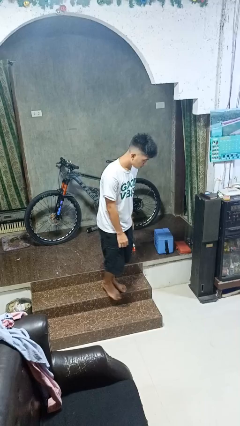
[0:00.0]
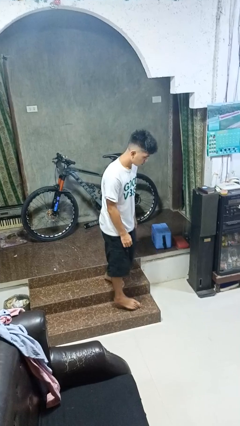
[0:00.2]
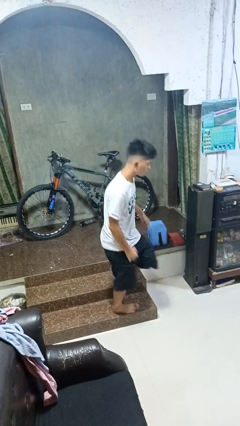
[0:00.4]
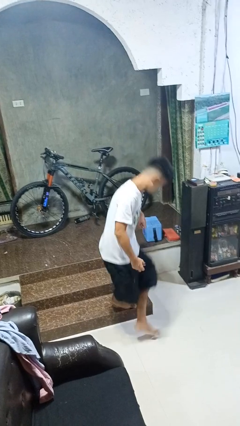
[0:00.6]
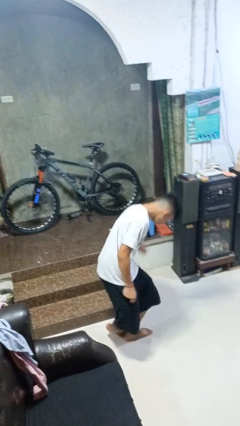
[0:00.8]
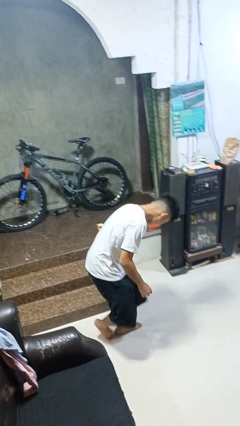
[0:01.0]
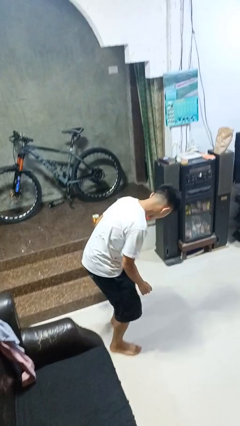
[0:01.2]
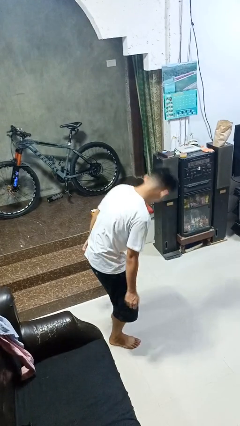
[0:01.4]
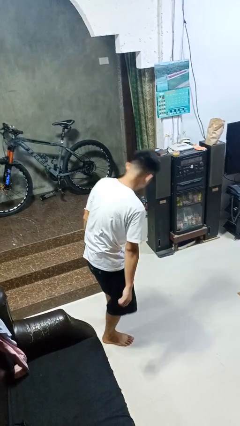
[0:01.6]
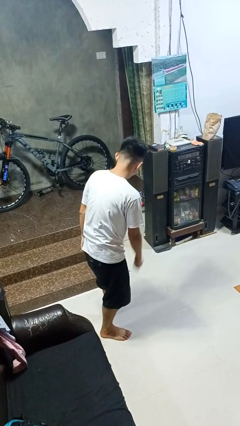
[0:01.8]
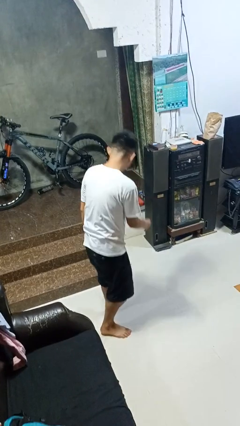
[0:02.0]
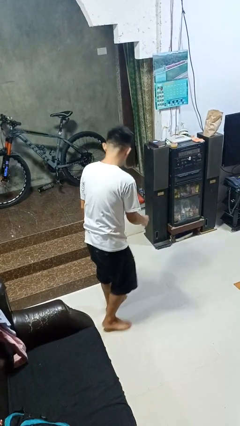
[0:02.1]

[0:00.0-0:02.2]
person trips on stair

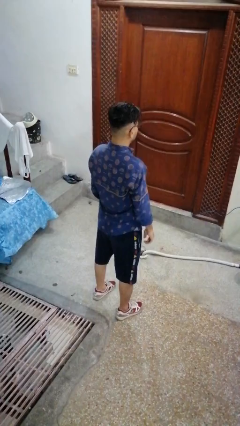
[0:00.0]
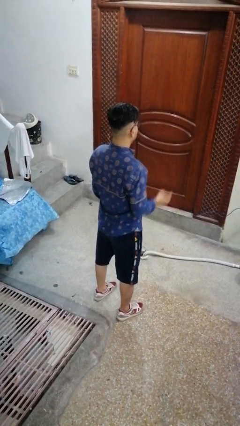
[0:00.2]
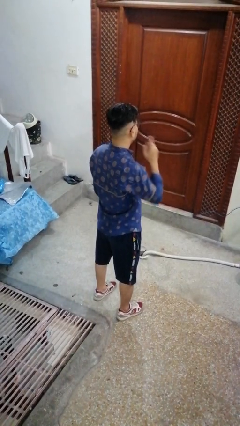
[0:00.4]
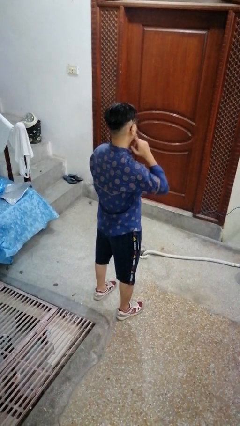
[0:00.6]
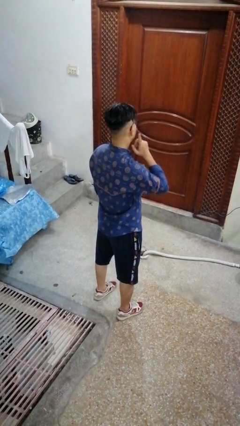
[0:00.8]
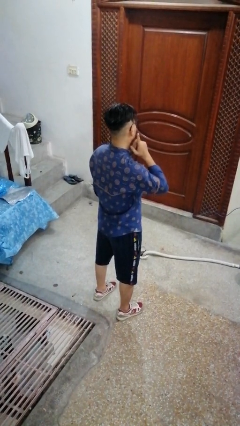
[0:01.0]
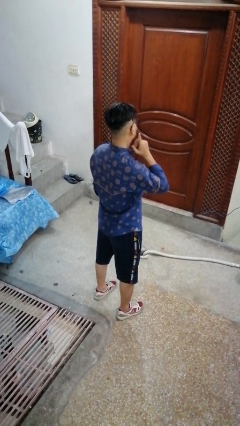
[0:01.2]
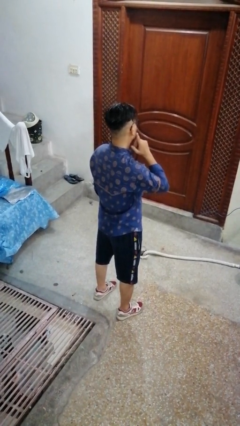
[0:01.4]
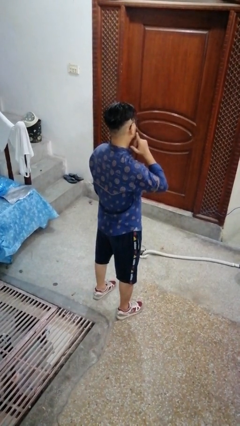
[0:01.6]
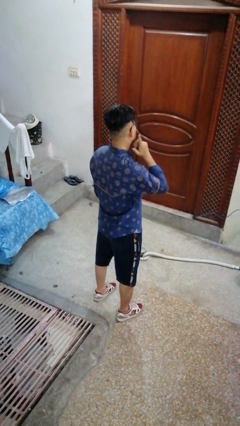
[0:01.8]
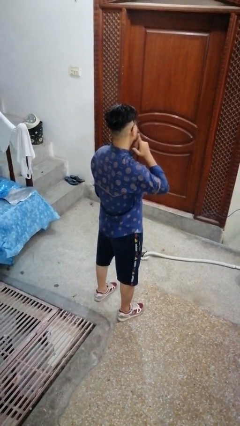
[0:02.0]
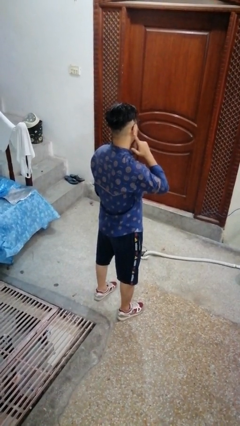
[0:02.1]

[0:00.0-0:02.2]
person gestures listen closely

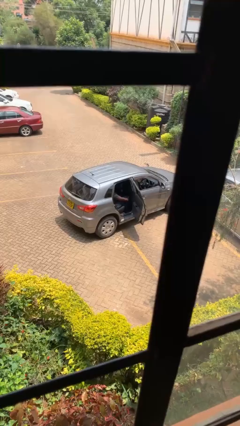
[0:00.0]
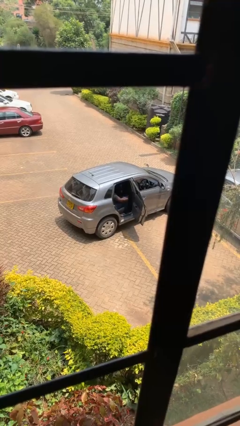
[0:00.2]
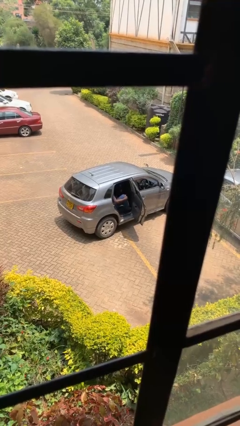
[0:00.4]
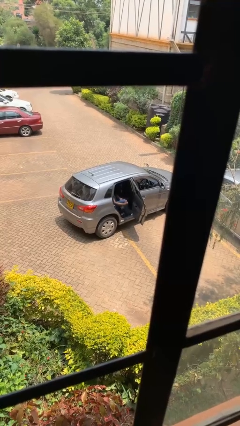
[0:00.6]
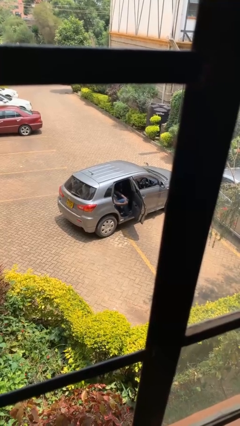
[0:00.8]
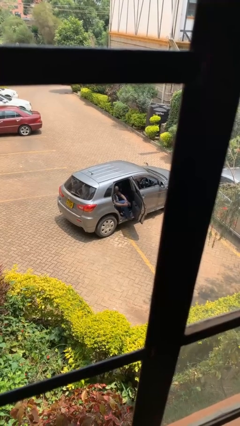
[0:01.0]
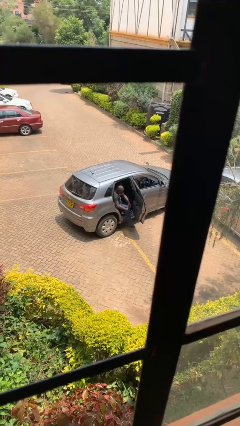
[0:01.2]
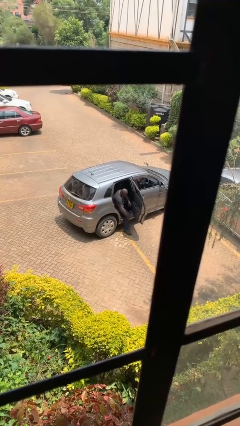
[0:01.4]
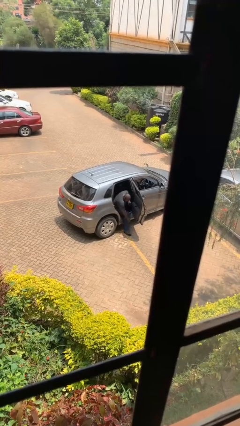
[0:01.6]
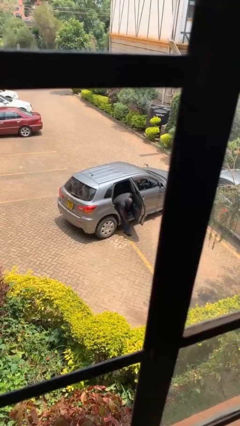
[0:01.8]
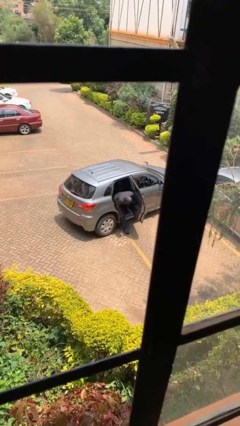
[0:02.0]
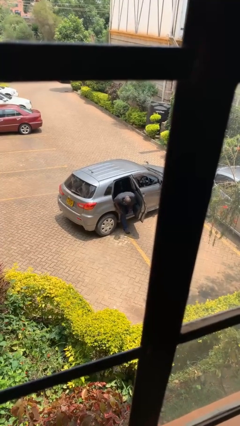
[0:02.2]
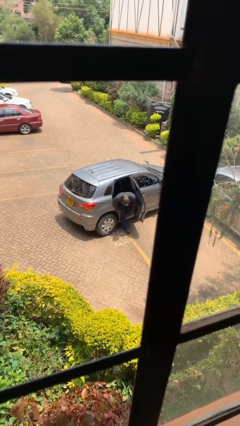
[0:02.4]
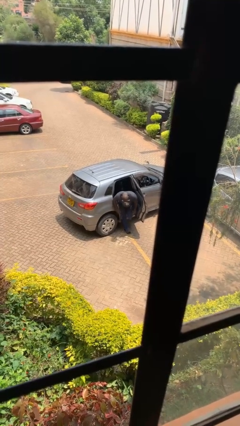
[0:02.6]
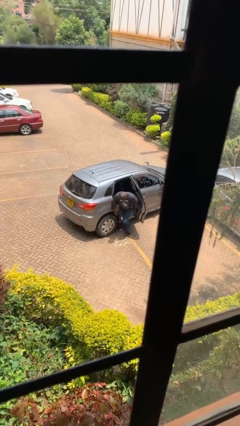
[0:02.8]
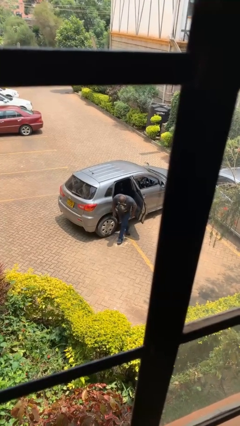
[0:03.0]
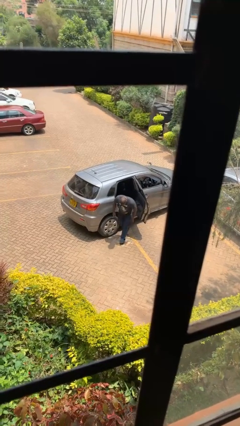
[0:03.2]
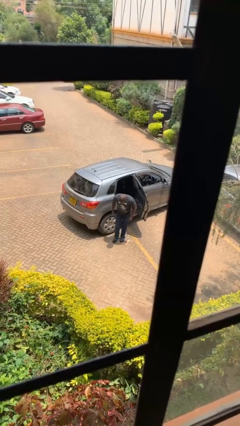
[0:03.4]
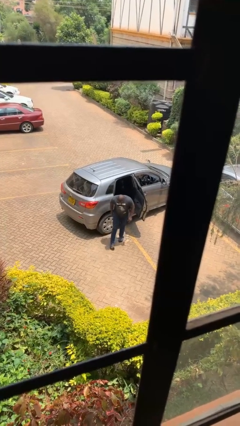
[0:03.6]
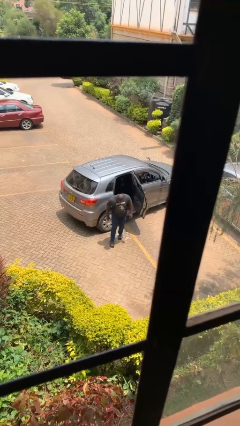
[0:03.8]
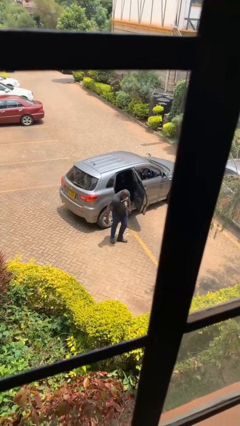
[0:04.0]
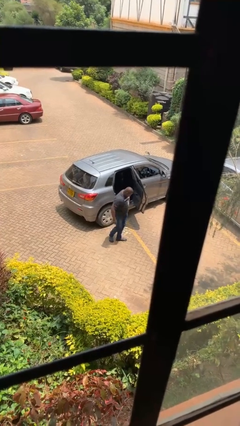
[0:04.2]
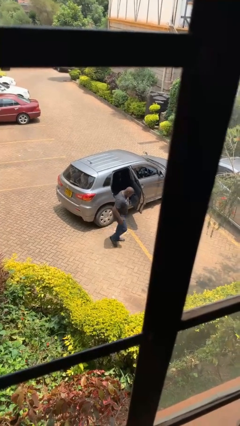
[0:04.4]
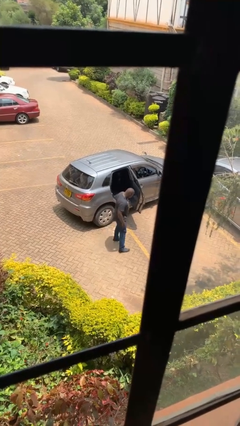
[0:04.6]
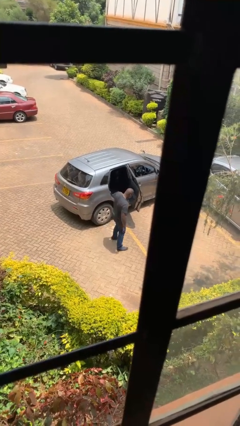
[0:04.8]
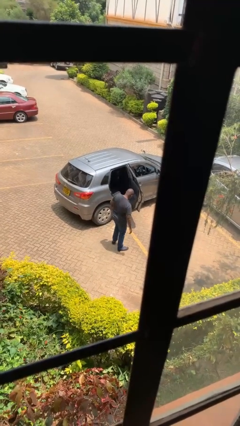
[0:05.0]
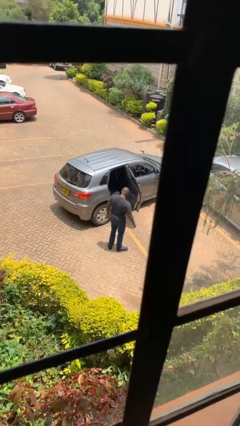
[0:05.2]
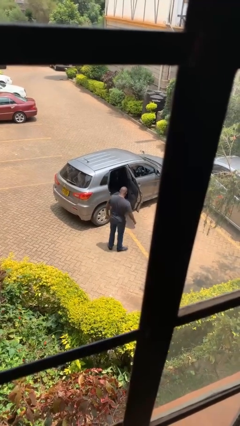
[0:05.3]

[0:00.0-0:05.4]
person exits car

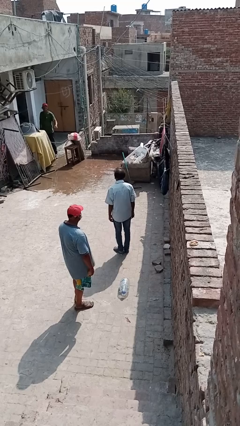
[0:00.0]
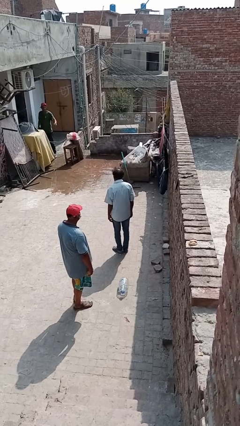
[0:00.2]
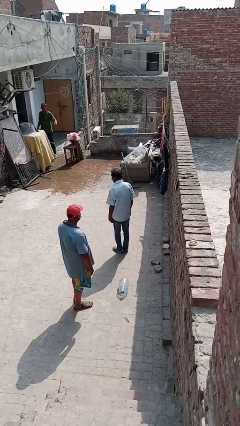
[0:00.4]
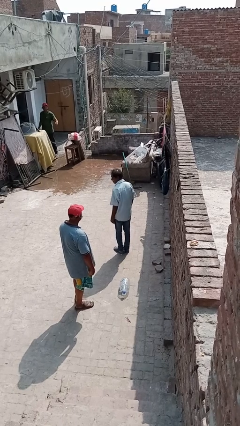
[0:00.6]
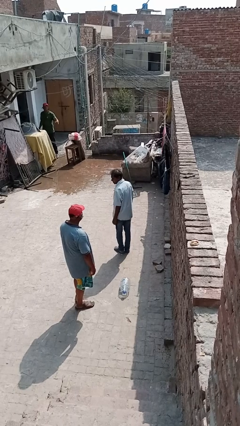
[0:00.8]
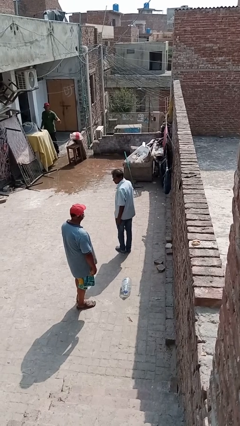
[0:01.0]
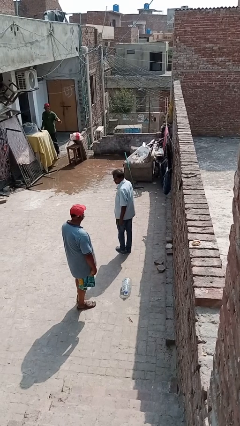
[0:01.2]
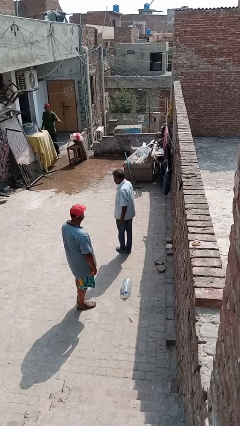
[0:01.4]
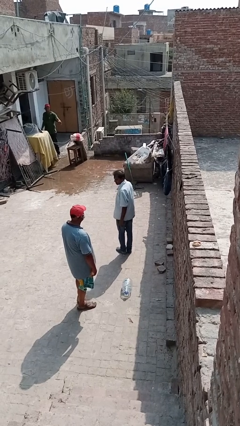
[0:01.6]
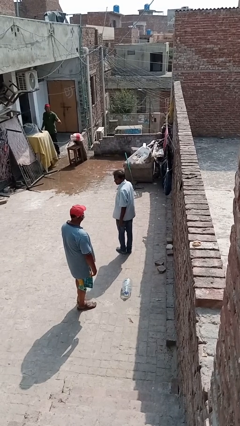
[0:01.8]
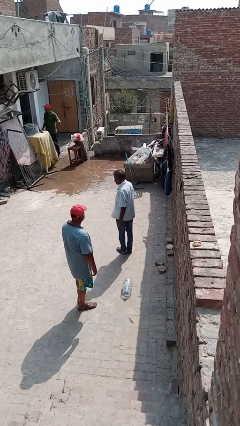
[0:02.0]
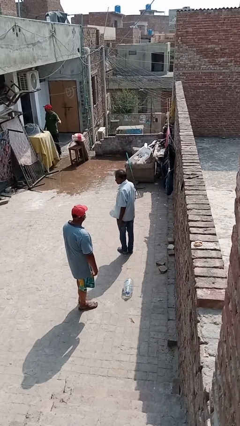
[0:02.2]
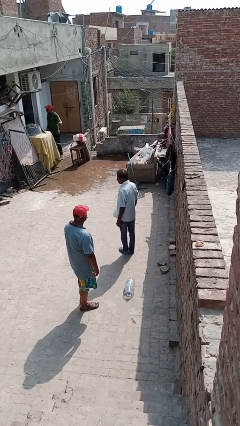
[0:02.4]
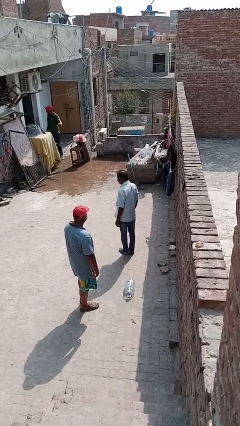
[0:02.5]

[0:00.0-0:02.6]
person looks over shoulder

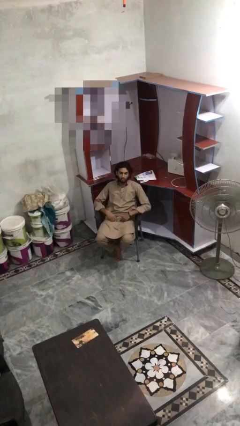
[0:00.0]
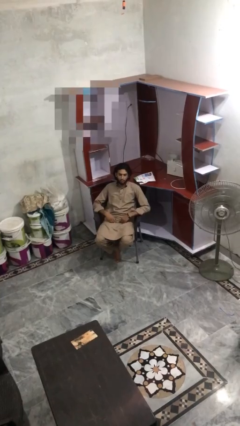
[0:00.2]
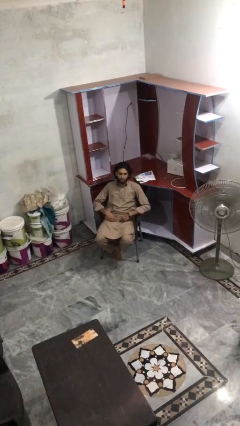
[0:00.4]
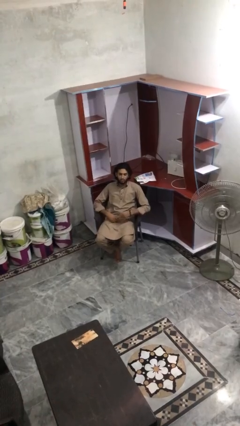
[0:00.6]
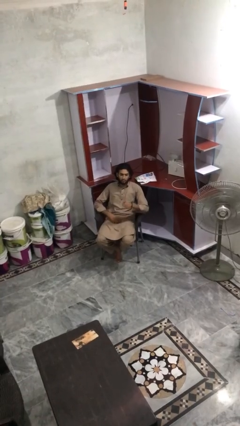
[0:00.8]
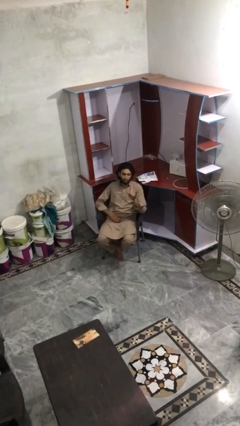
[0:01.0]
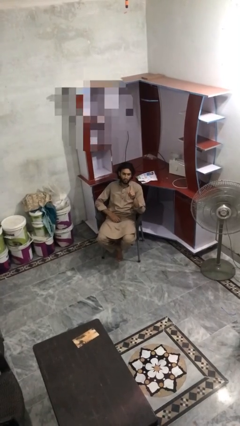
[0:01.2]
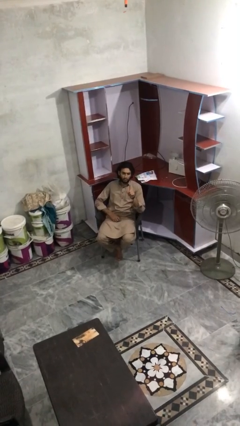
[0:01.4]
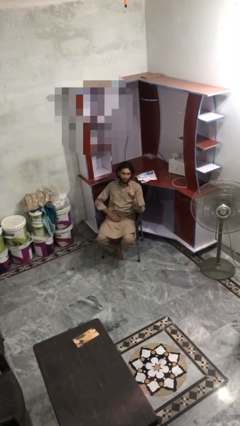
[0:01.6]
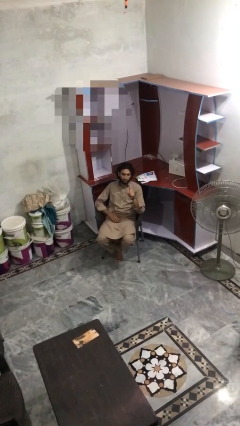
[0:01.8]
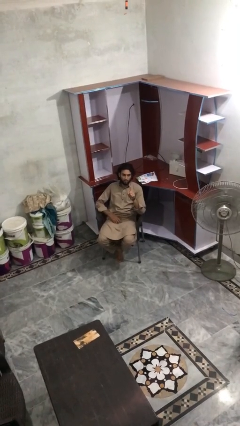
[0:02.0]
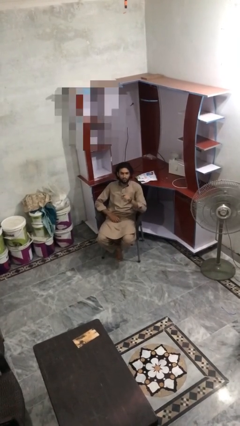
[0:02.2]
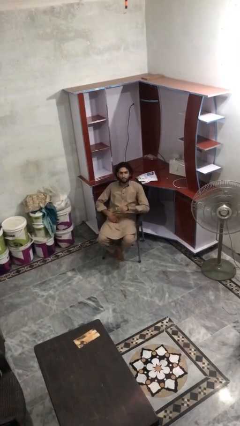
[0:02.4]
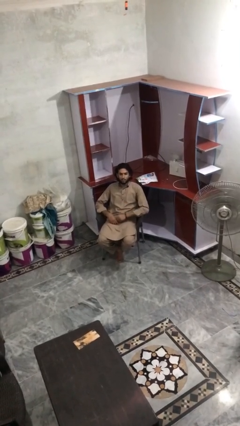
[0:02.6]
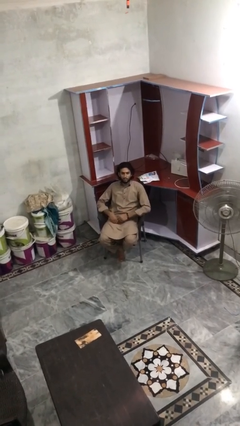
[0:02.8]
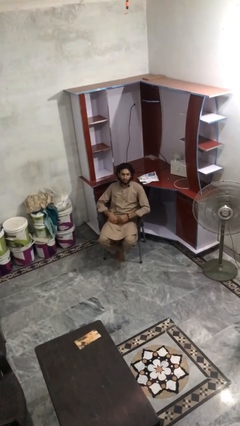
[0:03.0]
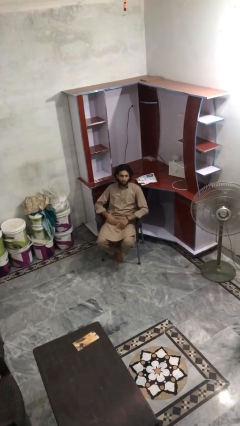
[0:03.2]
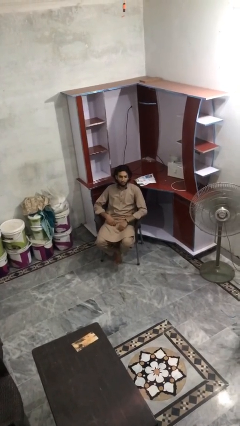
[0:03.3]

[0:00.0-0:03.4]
person gestures number one

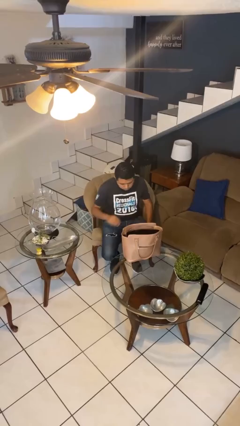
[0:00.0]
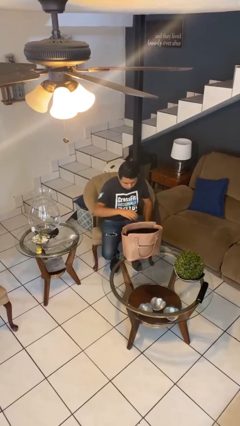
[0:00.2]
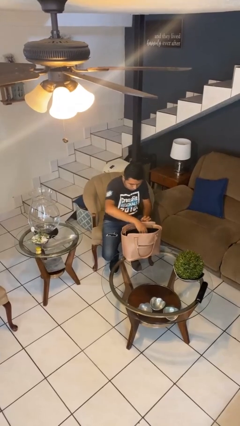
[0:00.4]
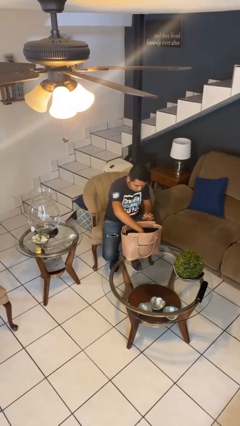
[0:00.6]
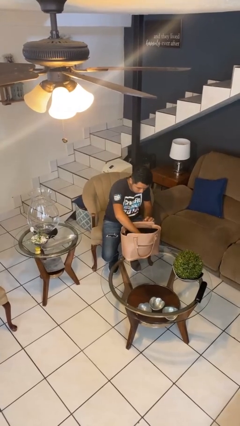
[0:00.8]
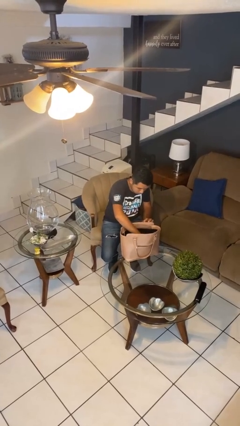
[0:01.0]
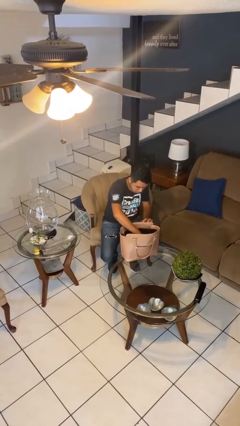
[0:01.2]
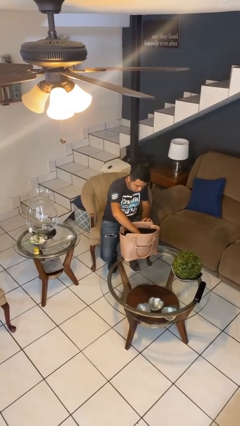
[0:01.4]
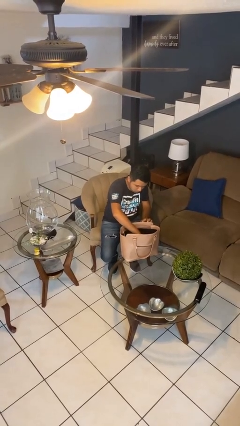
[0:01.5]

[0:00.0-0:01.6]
person searches in purse
